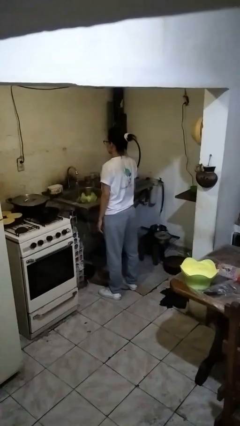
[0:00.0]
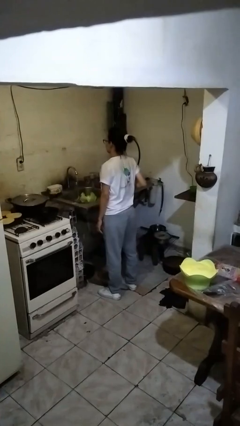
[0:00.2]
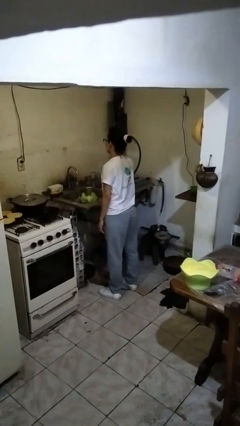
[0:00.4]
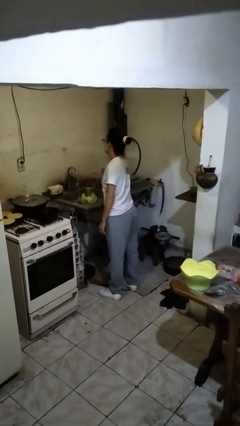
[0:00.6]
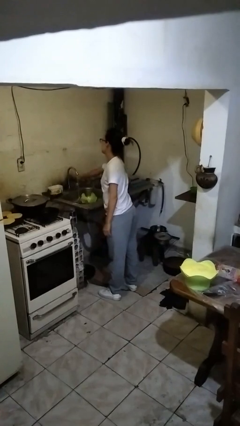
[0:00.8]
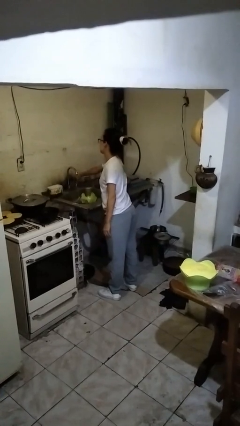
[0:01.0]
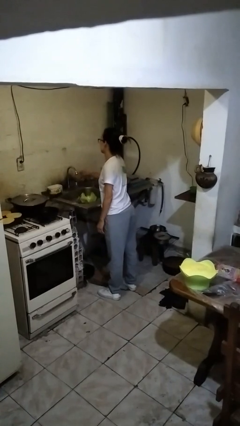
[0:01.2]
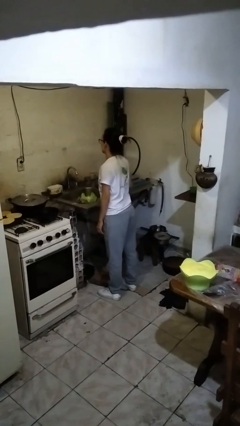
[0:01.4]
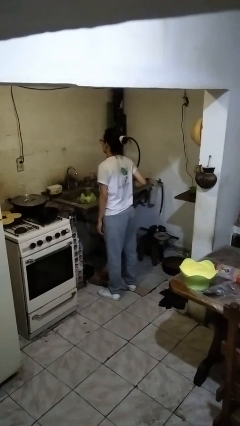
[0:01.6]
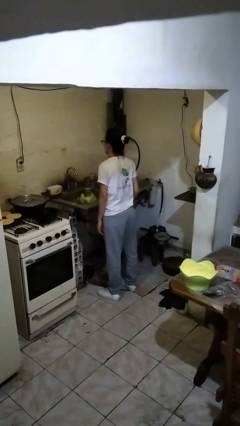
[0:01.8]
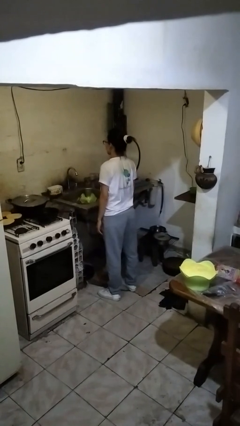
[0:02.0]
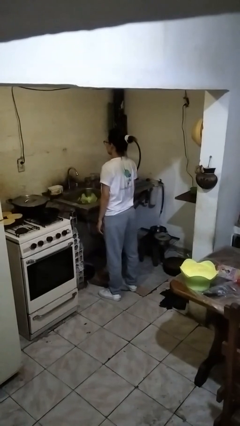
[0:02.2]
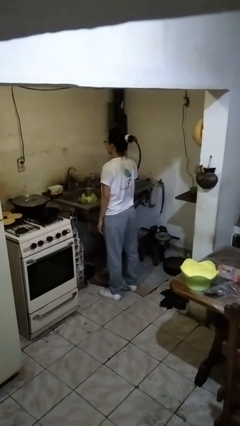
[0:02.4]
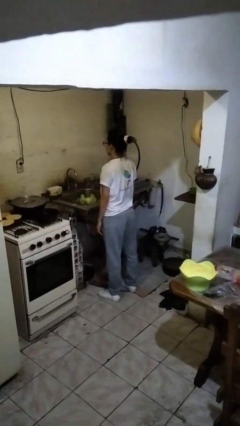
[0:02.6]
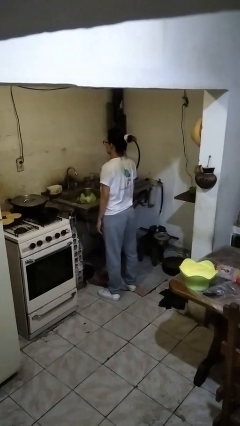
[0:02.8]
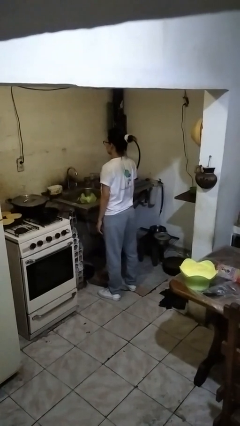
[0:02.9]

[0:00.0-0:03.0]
person turns off faucet

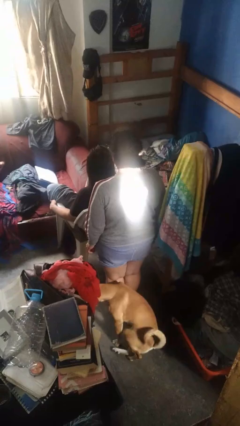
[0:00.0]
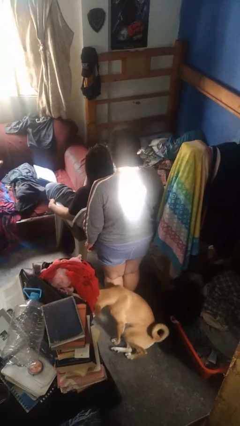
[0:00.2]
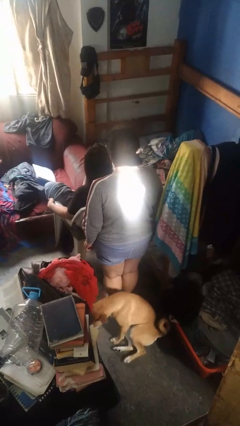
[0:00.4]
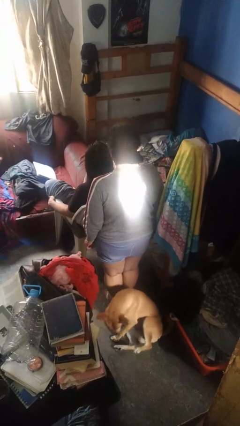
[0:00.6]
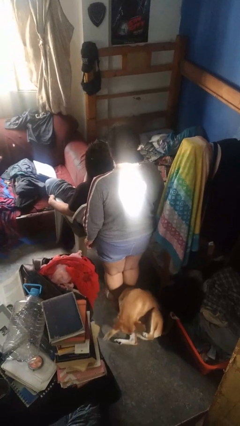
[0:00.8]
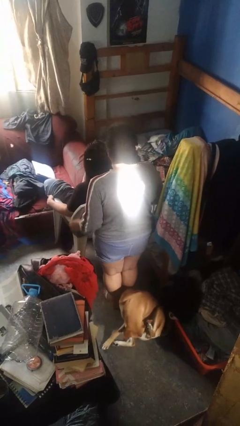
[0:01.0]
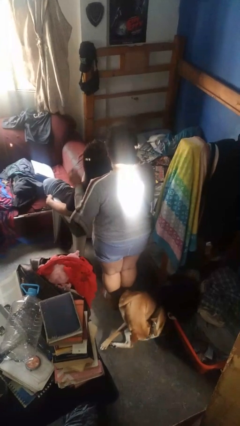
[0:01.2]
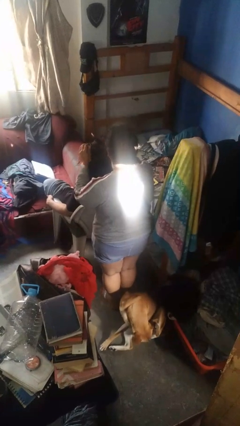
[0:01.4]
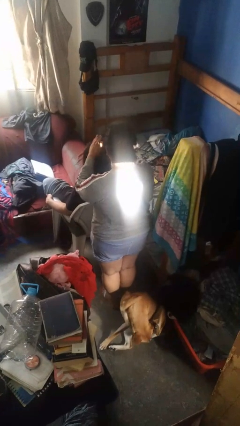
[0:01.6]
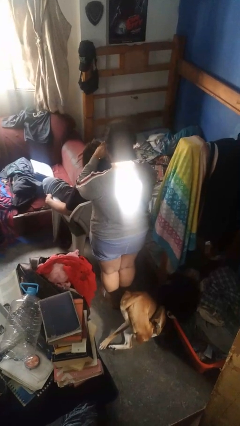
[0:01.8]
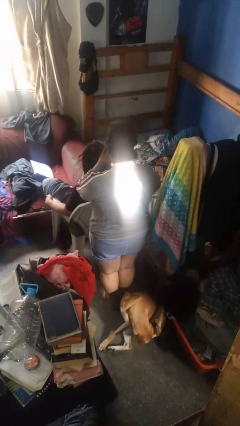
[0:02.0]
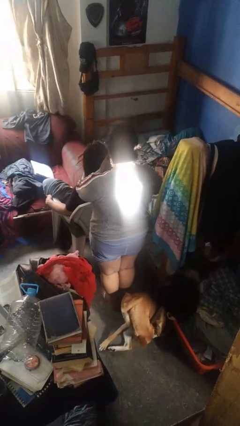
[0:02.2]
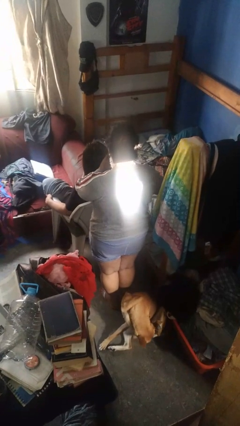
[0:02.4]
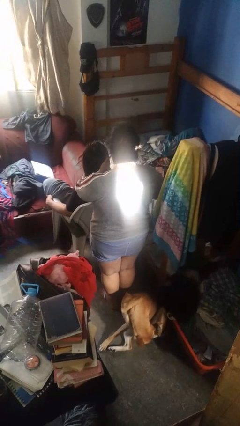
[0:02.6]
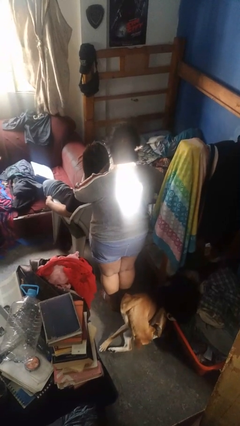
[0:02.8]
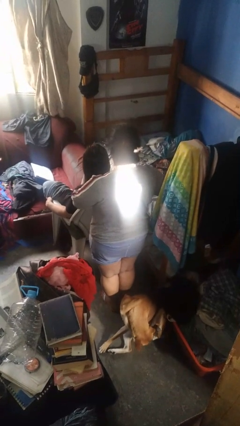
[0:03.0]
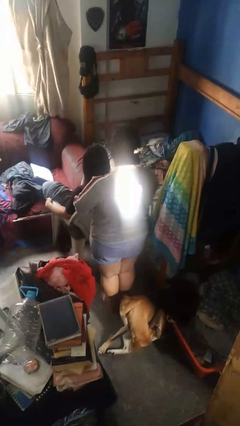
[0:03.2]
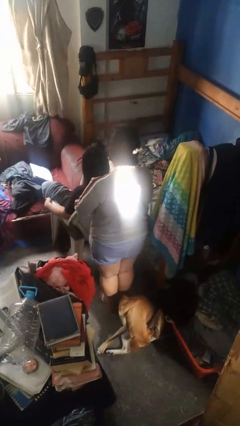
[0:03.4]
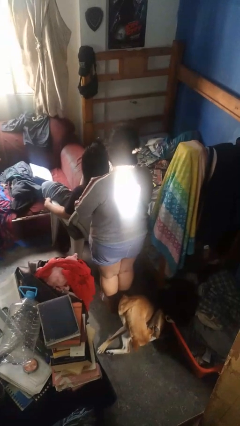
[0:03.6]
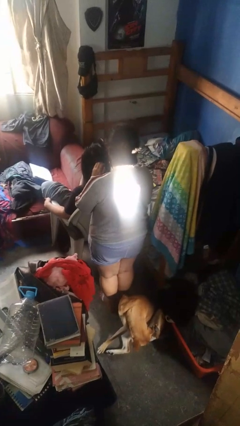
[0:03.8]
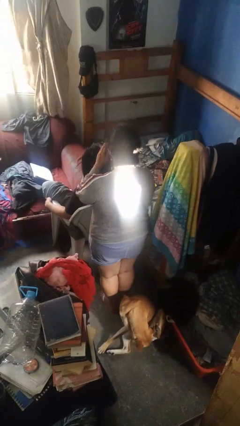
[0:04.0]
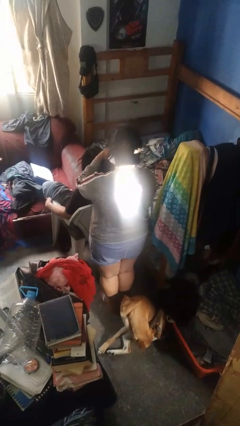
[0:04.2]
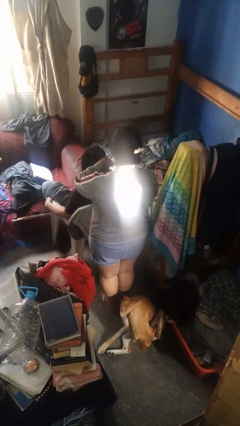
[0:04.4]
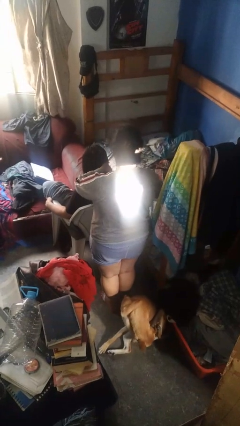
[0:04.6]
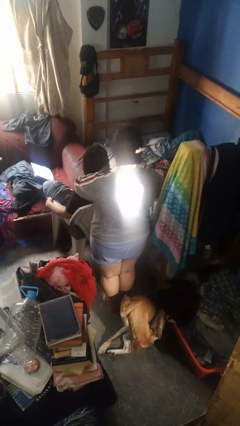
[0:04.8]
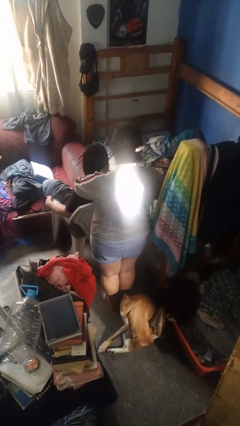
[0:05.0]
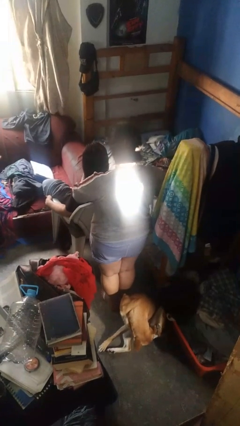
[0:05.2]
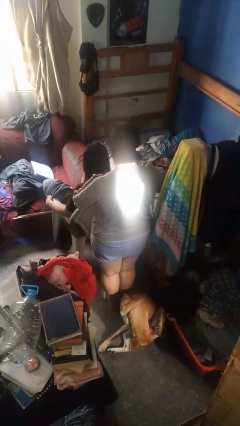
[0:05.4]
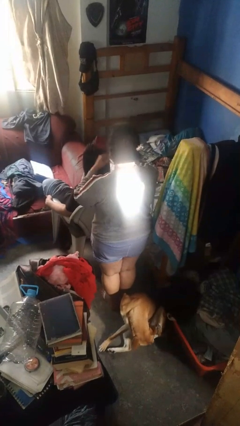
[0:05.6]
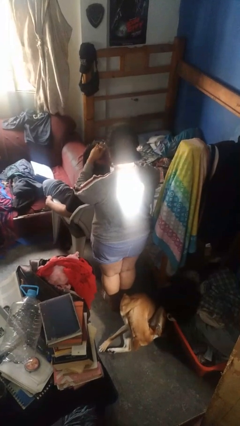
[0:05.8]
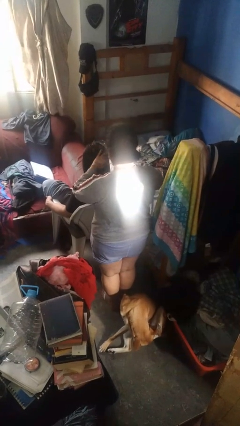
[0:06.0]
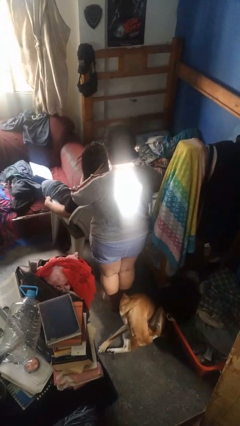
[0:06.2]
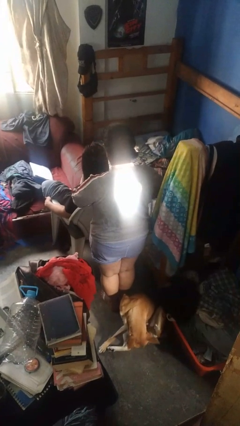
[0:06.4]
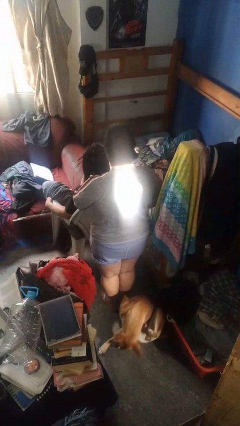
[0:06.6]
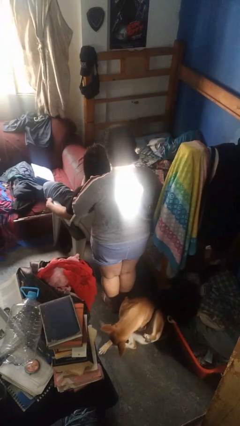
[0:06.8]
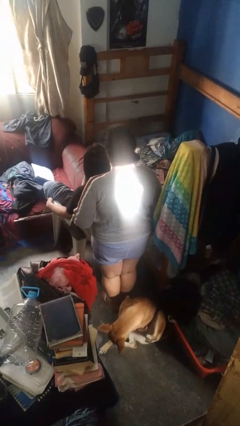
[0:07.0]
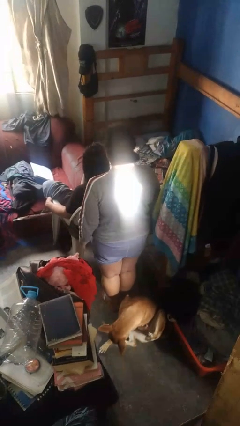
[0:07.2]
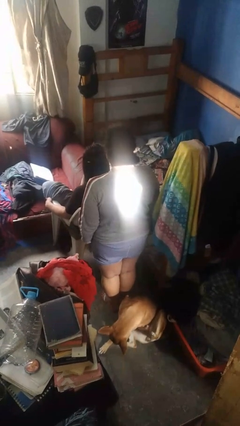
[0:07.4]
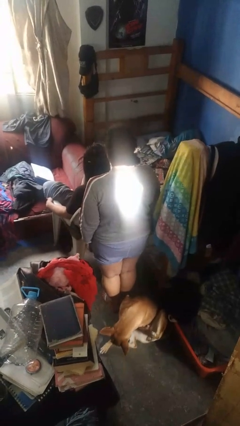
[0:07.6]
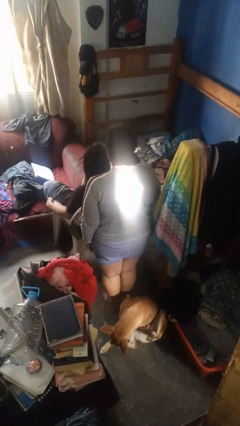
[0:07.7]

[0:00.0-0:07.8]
person brushes hair of person

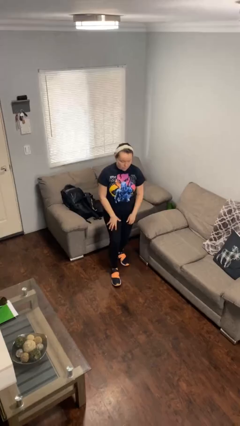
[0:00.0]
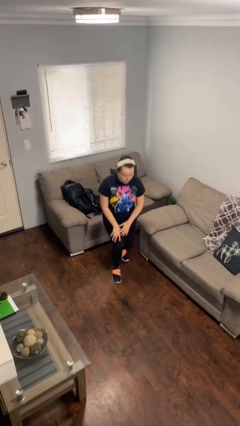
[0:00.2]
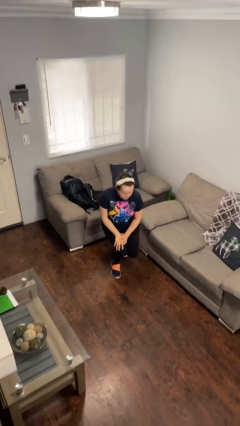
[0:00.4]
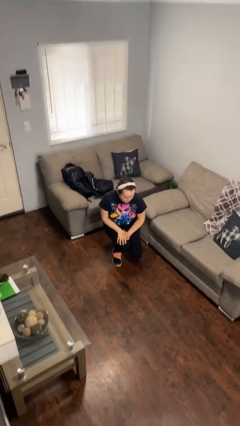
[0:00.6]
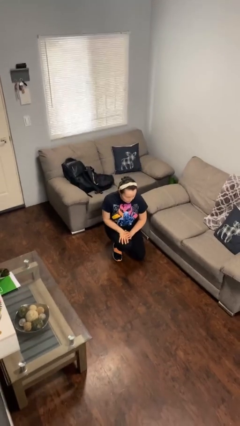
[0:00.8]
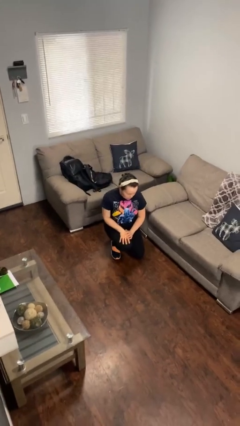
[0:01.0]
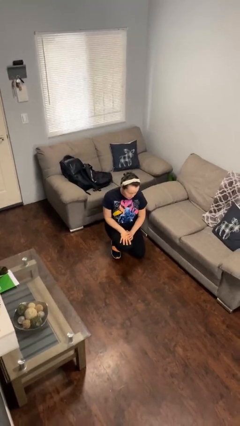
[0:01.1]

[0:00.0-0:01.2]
person kneels

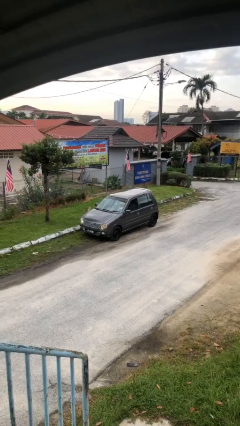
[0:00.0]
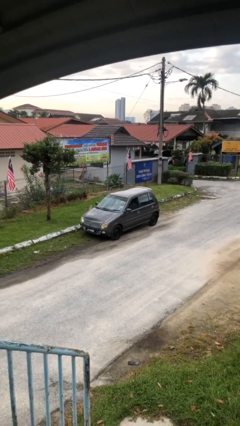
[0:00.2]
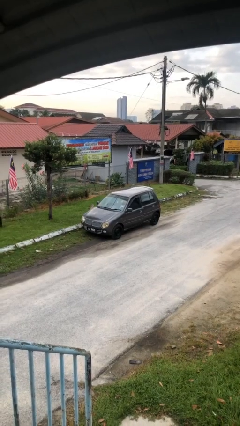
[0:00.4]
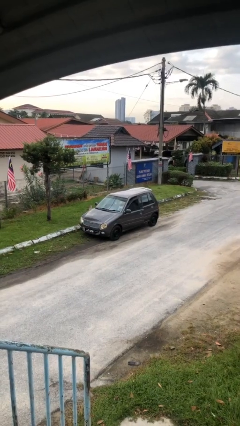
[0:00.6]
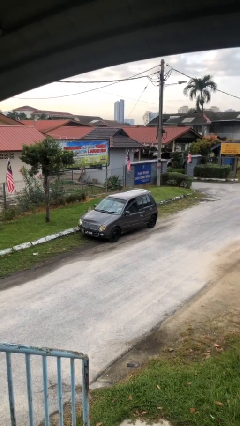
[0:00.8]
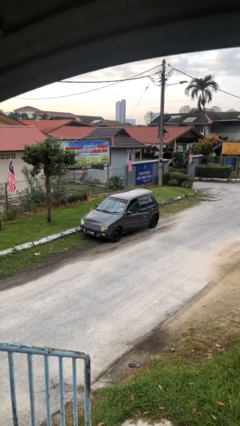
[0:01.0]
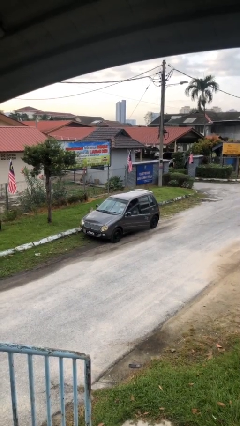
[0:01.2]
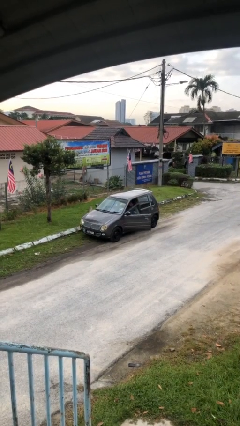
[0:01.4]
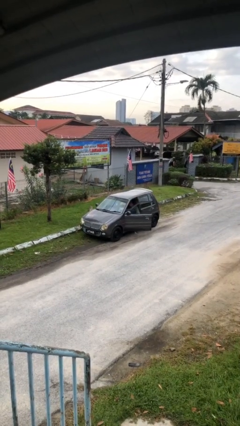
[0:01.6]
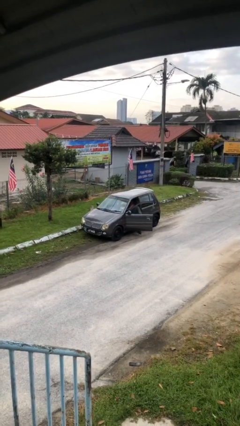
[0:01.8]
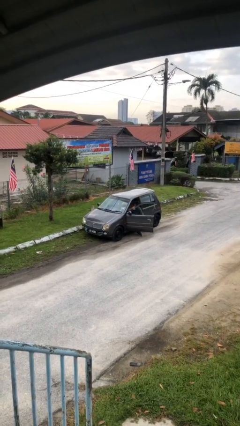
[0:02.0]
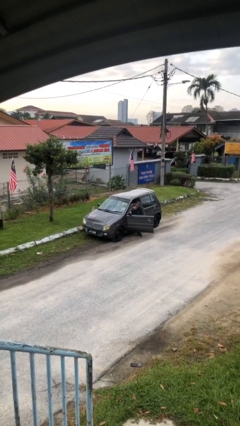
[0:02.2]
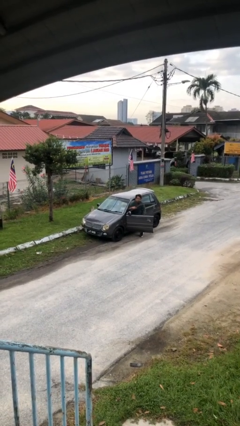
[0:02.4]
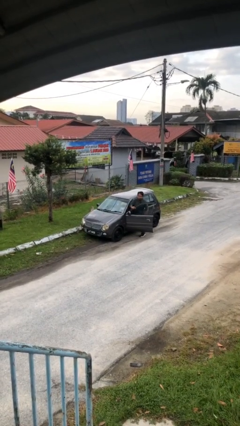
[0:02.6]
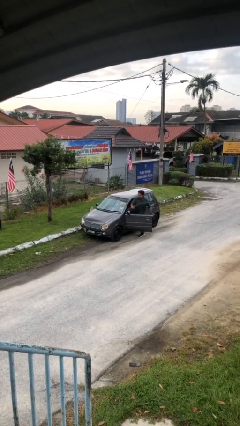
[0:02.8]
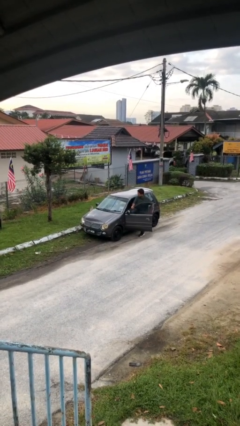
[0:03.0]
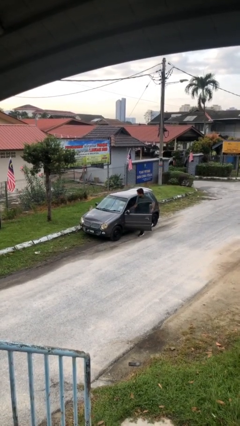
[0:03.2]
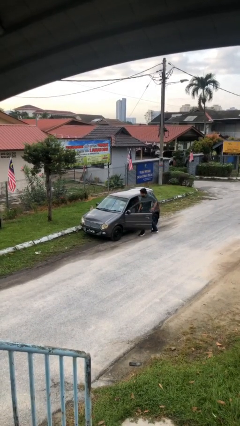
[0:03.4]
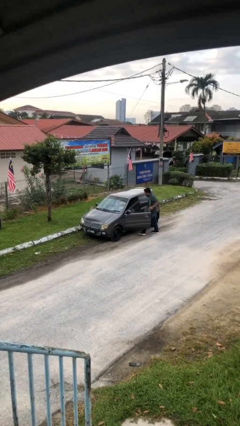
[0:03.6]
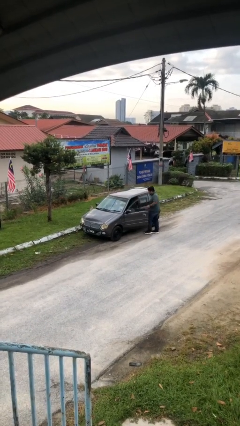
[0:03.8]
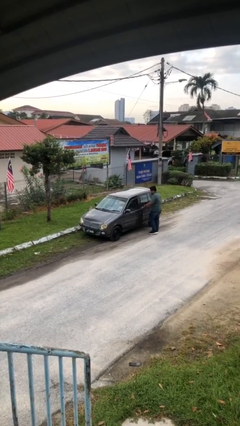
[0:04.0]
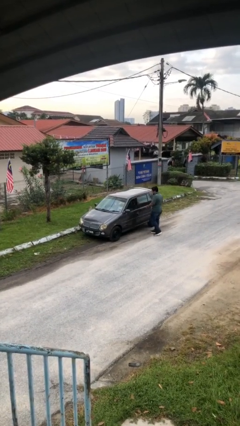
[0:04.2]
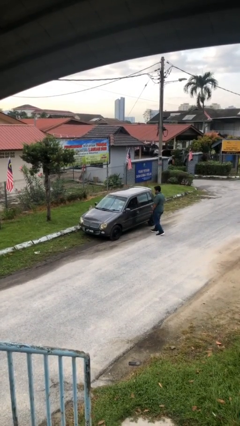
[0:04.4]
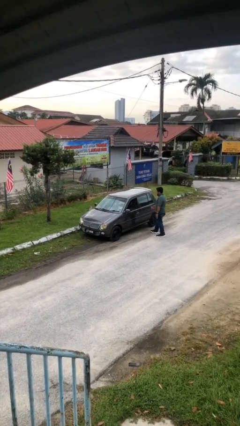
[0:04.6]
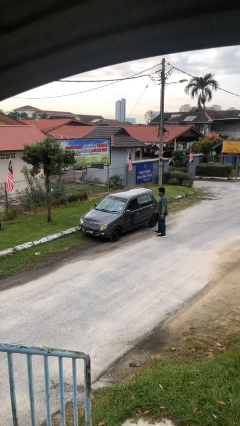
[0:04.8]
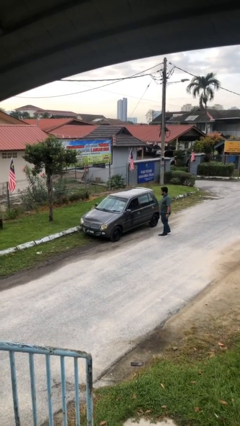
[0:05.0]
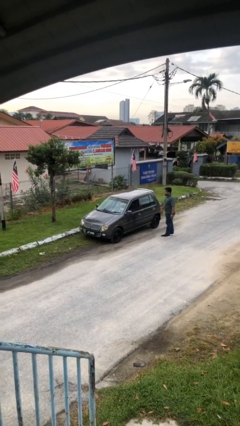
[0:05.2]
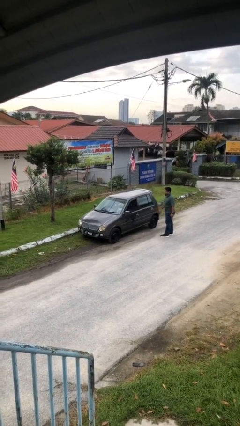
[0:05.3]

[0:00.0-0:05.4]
car drops off person

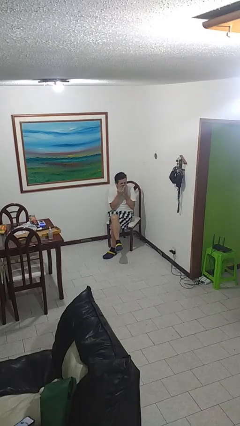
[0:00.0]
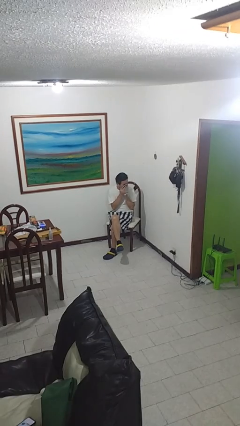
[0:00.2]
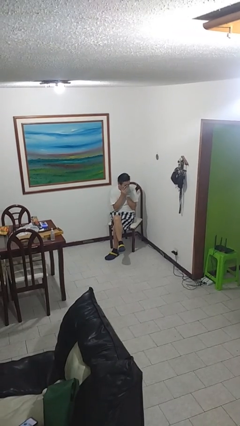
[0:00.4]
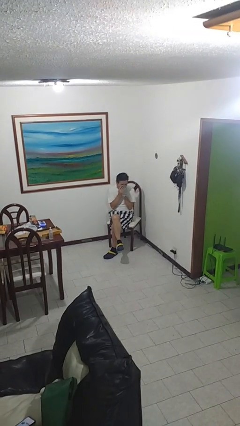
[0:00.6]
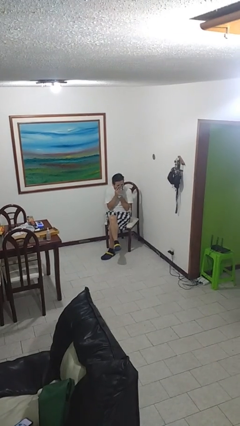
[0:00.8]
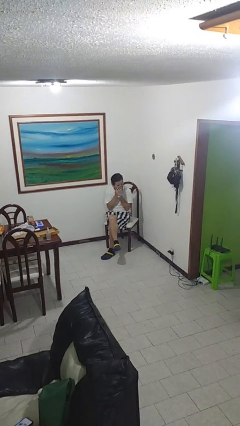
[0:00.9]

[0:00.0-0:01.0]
person blows nose
